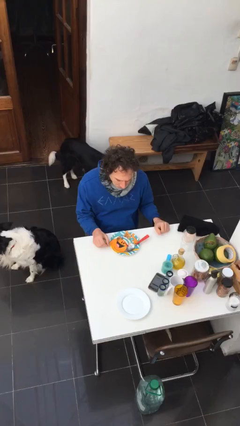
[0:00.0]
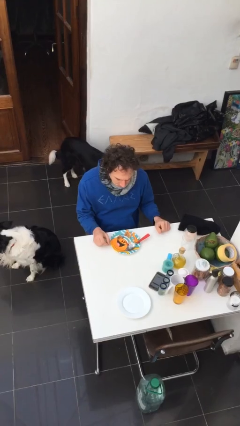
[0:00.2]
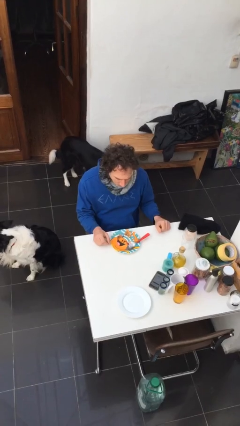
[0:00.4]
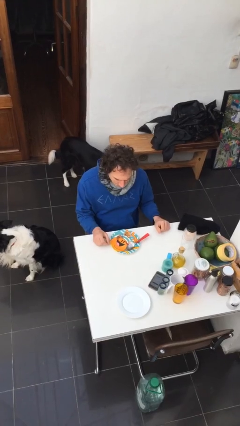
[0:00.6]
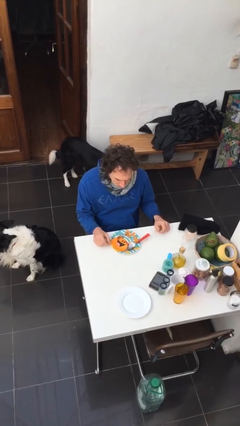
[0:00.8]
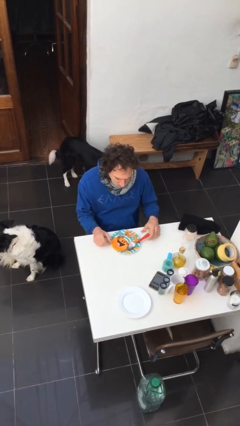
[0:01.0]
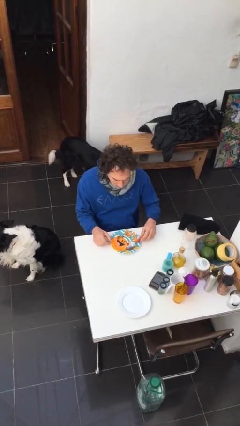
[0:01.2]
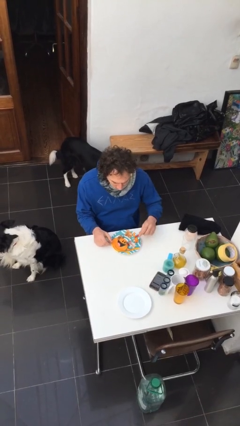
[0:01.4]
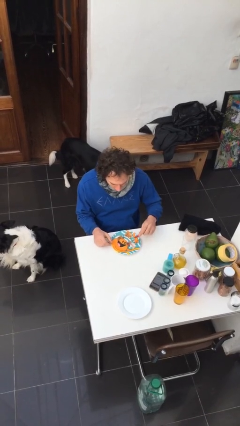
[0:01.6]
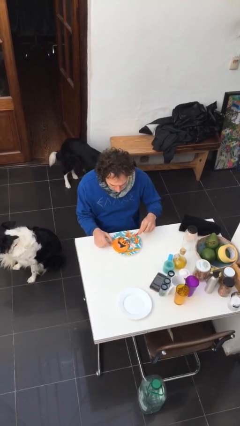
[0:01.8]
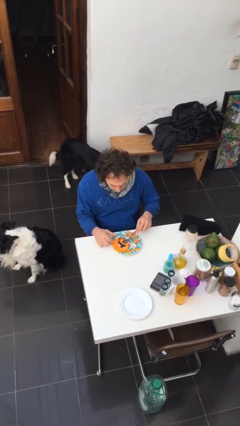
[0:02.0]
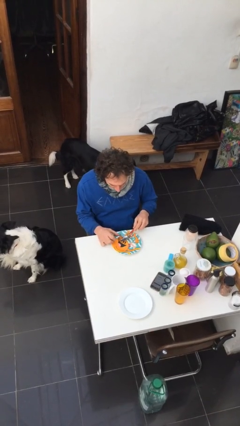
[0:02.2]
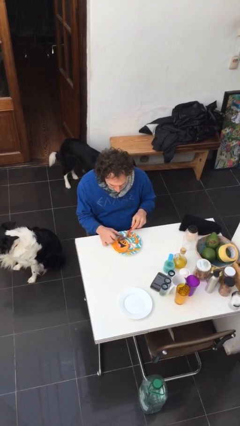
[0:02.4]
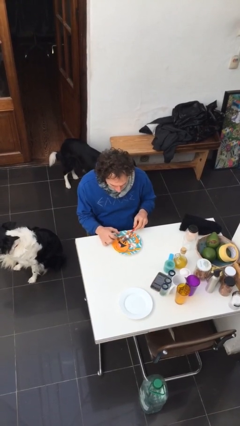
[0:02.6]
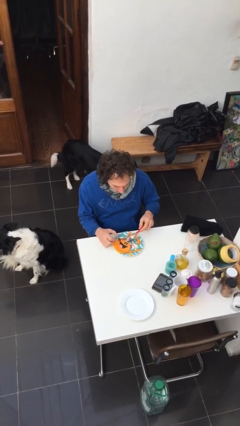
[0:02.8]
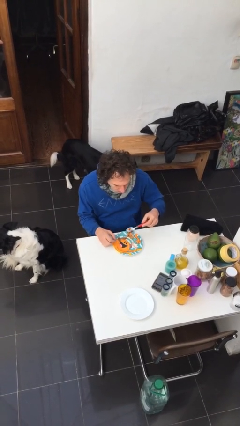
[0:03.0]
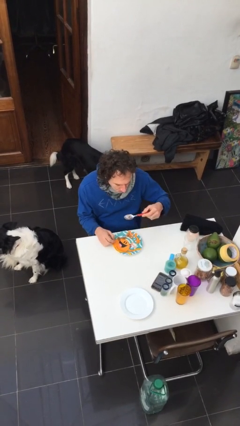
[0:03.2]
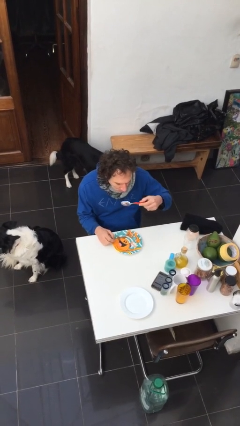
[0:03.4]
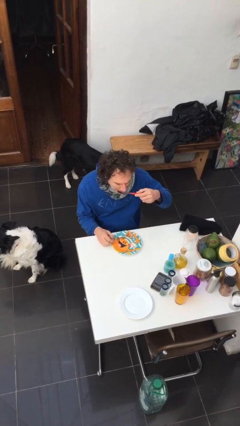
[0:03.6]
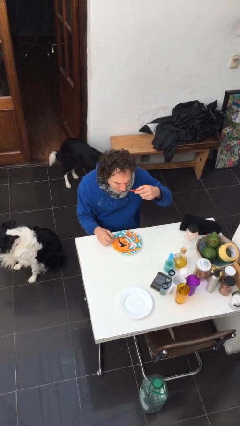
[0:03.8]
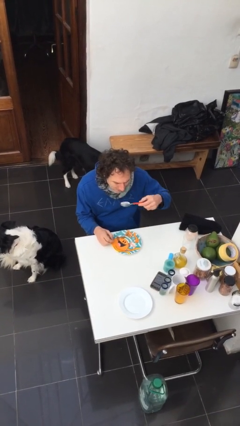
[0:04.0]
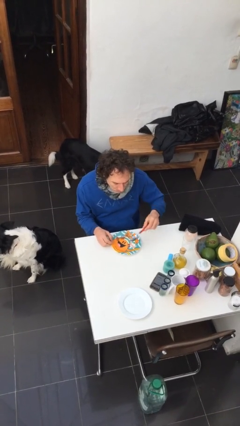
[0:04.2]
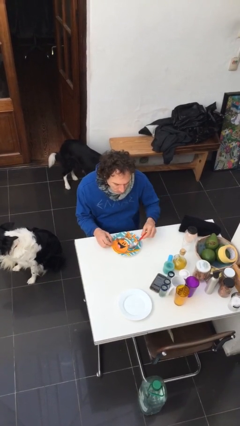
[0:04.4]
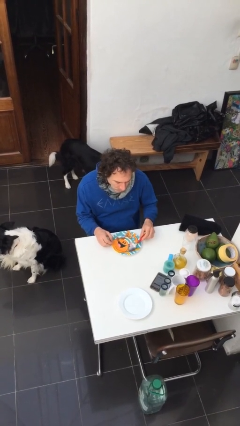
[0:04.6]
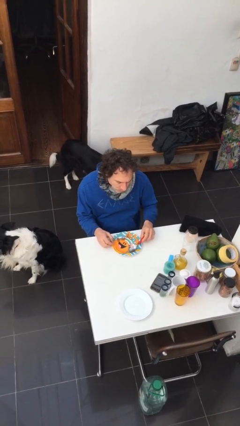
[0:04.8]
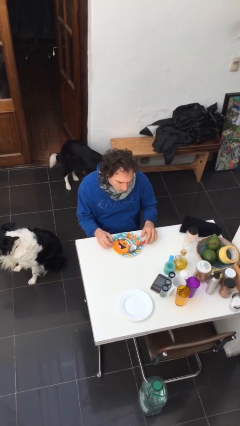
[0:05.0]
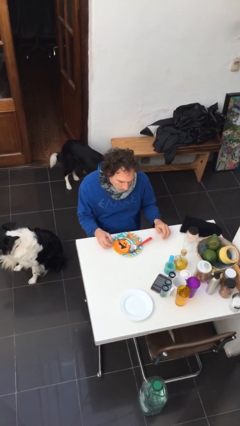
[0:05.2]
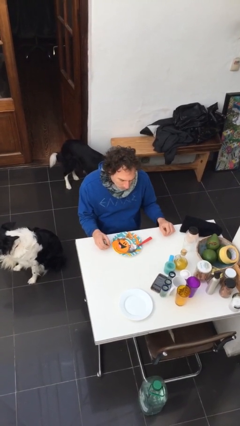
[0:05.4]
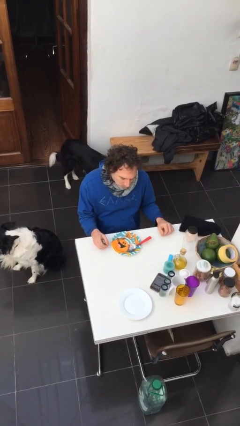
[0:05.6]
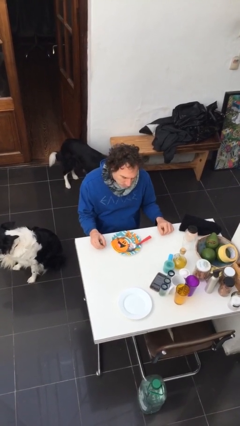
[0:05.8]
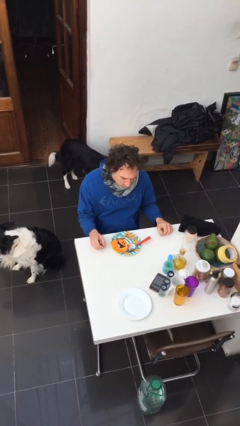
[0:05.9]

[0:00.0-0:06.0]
person eats with utensil

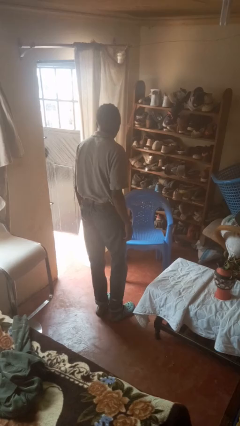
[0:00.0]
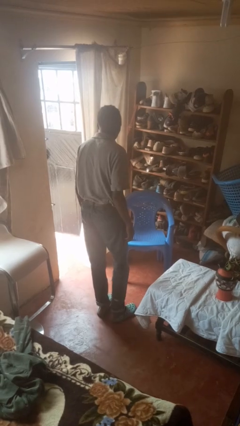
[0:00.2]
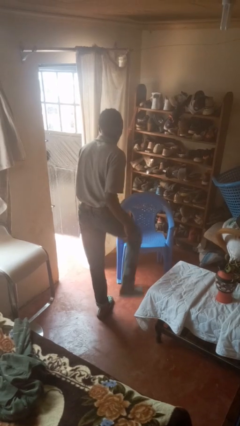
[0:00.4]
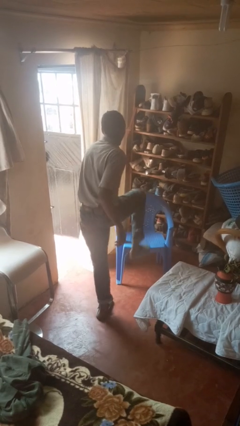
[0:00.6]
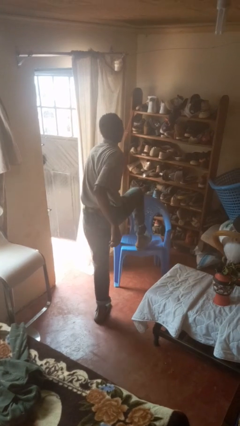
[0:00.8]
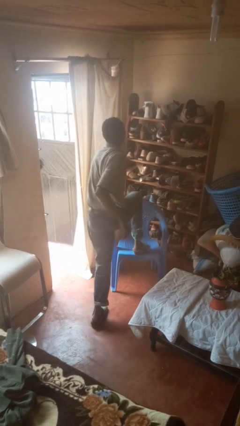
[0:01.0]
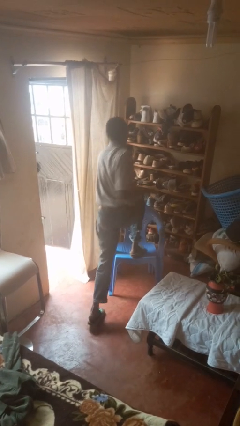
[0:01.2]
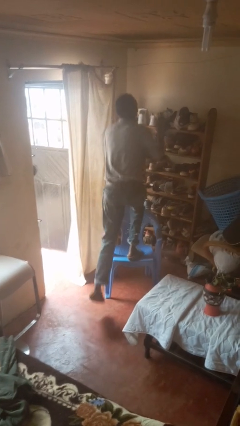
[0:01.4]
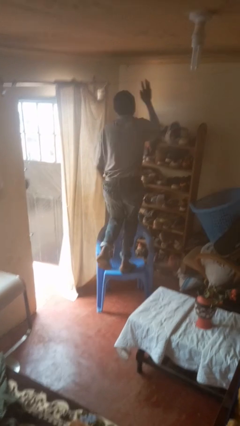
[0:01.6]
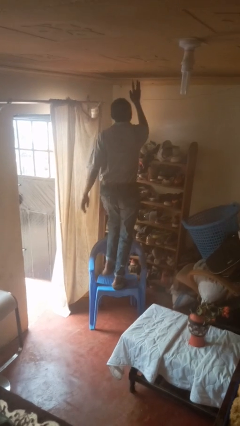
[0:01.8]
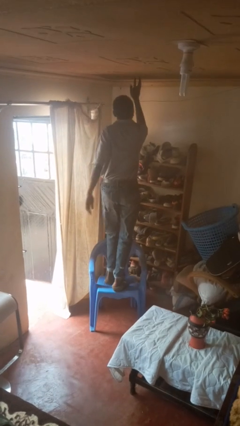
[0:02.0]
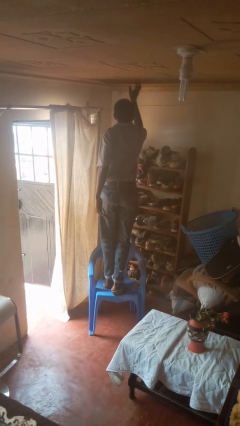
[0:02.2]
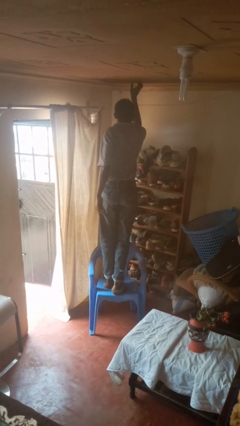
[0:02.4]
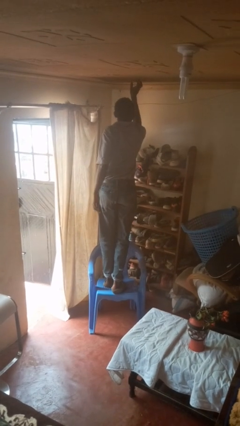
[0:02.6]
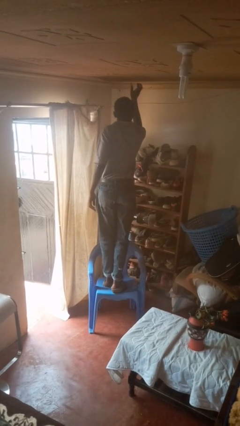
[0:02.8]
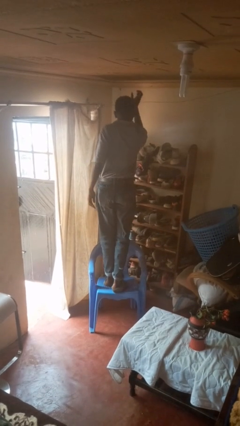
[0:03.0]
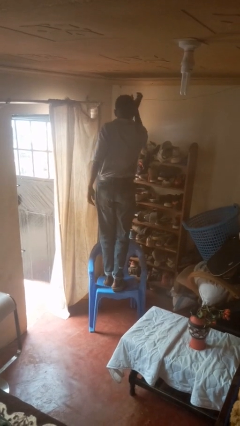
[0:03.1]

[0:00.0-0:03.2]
person climbs on chair

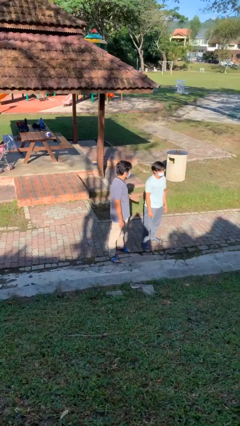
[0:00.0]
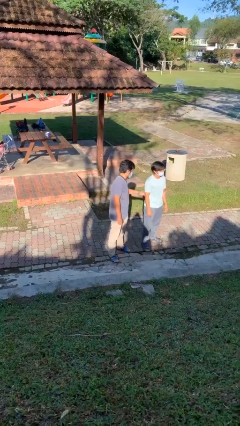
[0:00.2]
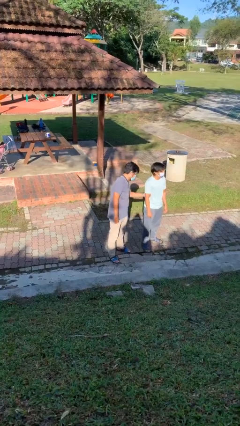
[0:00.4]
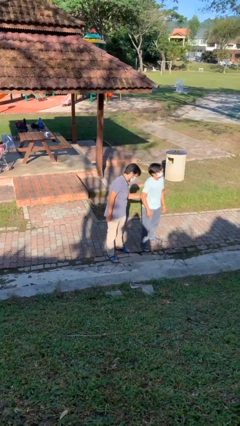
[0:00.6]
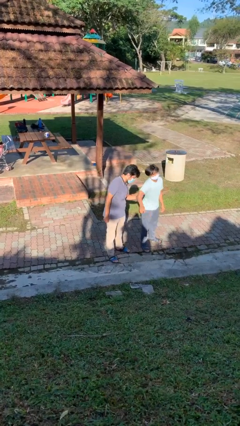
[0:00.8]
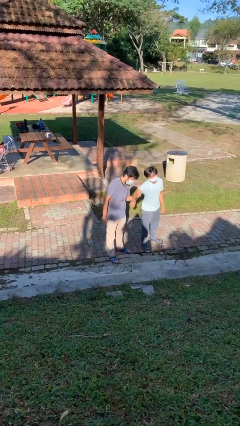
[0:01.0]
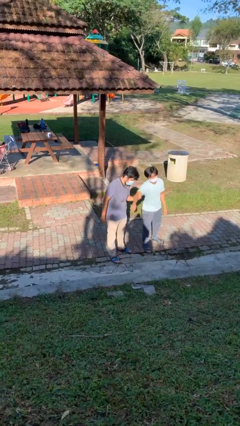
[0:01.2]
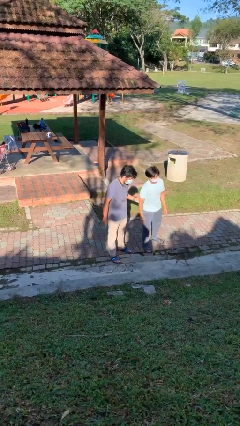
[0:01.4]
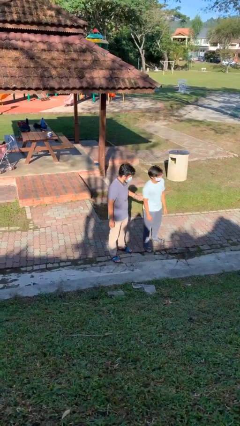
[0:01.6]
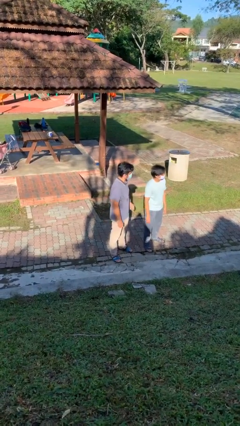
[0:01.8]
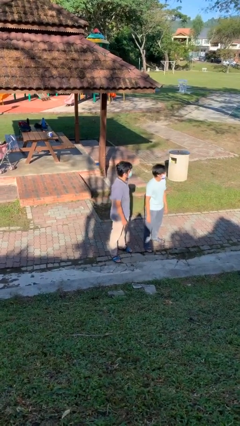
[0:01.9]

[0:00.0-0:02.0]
person grabs person by bicep

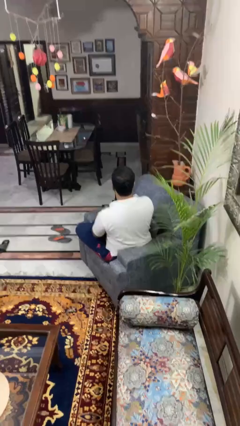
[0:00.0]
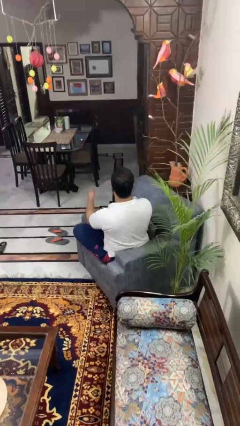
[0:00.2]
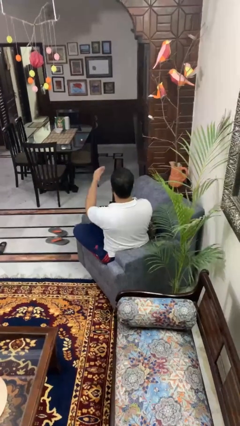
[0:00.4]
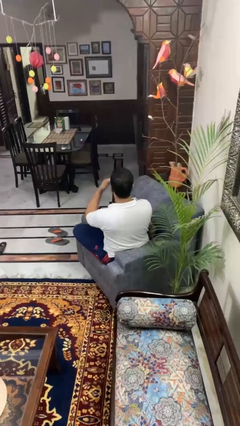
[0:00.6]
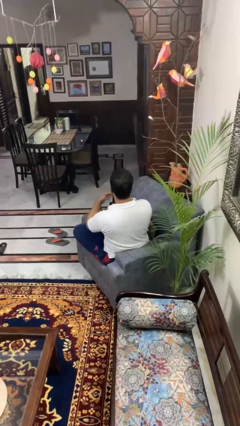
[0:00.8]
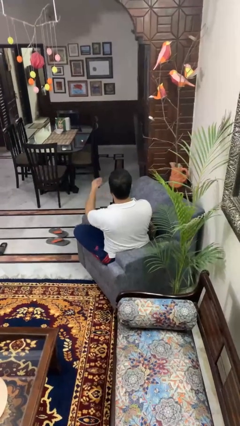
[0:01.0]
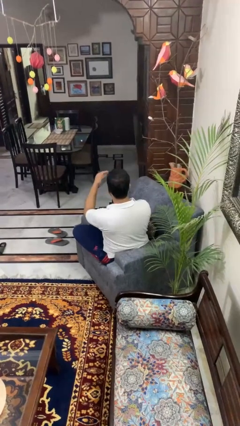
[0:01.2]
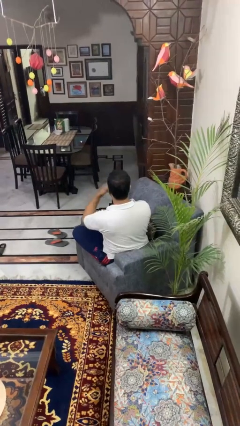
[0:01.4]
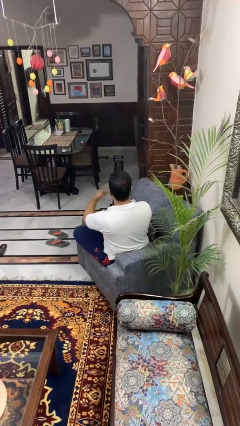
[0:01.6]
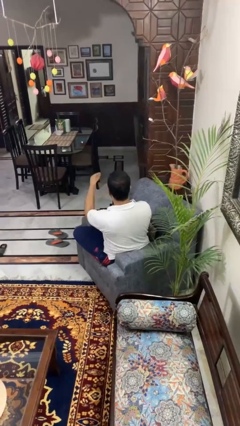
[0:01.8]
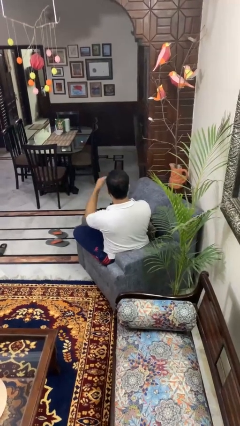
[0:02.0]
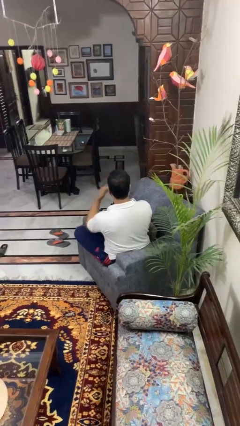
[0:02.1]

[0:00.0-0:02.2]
person gestures come here

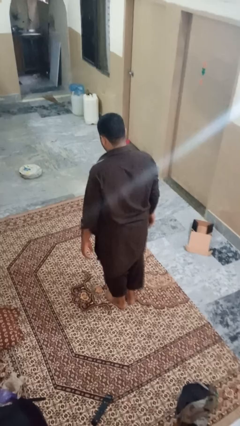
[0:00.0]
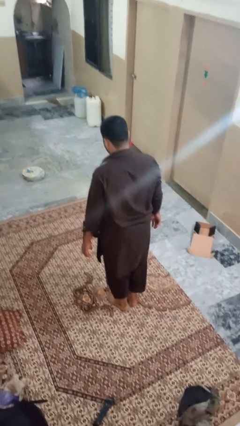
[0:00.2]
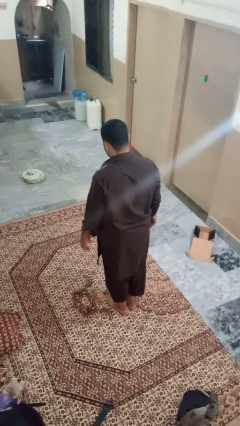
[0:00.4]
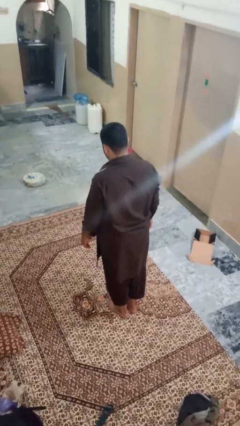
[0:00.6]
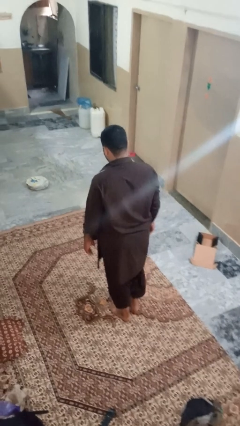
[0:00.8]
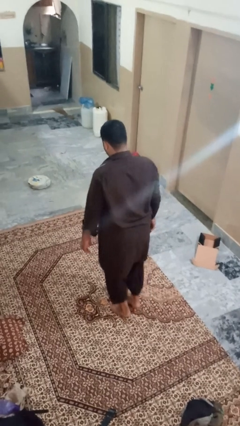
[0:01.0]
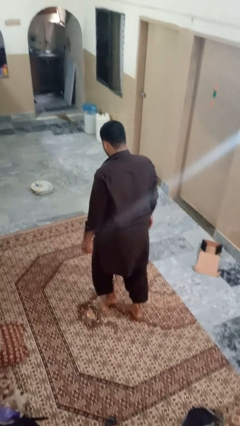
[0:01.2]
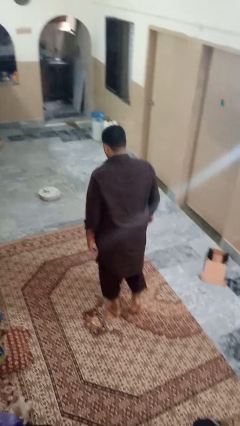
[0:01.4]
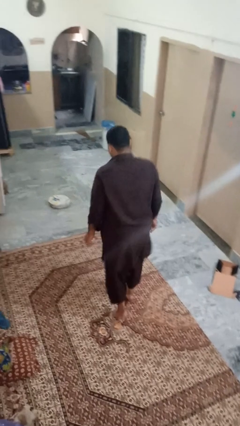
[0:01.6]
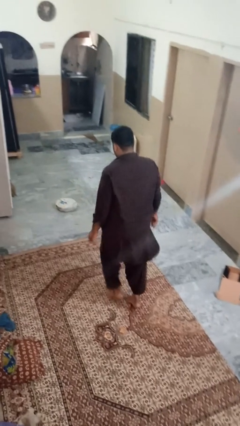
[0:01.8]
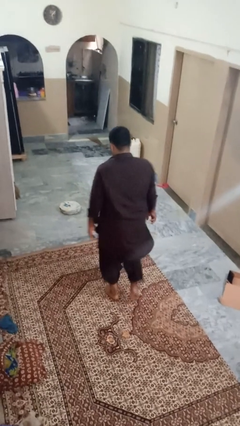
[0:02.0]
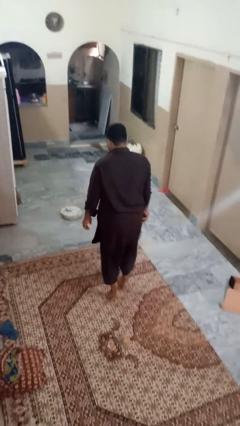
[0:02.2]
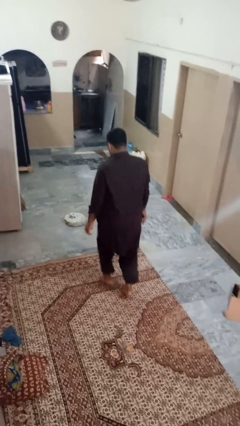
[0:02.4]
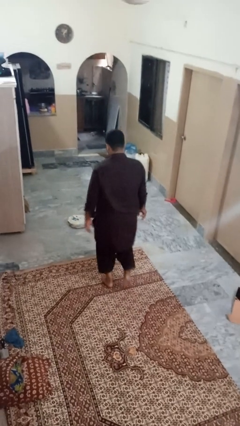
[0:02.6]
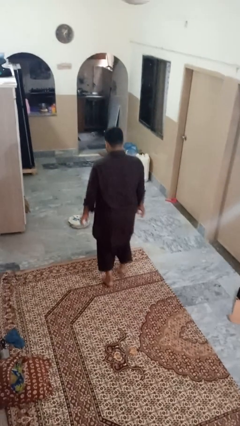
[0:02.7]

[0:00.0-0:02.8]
person walks tiptoe

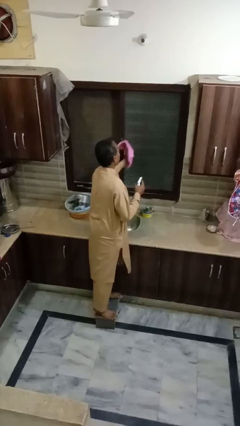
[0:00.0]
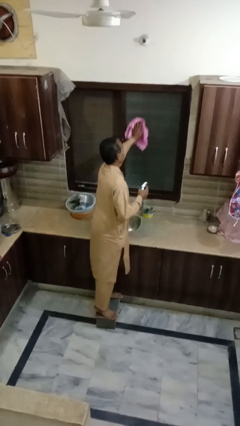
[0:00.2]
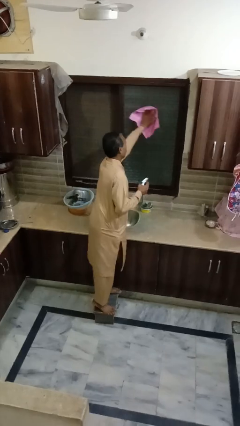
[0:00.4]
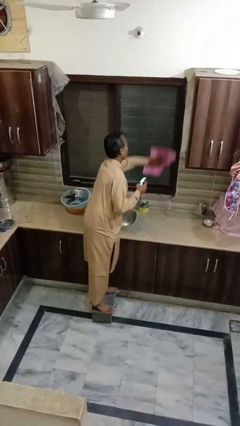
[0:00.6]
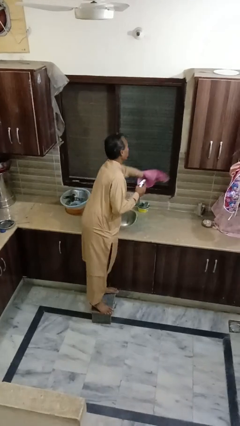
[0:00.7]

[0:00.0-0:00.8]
person washes window
